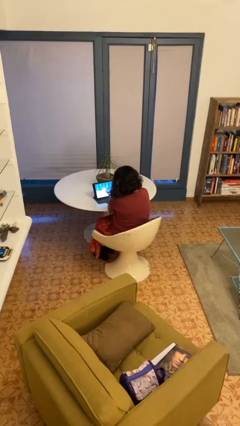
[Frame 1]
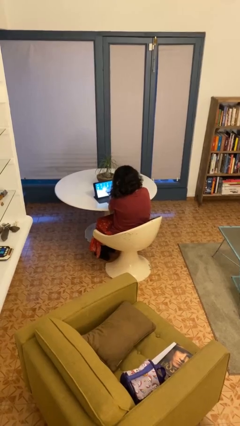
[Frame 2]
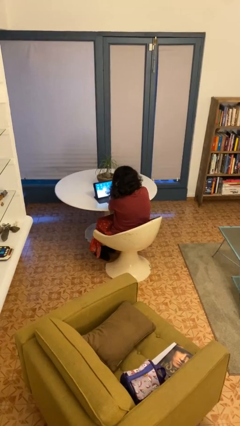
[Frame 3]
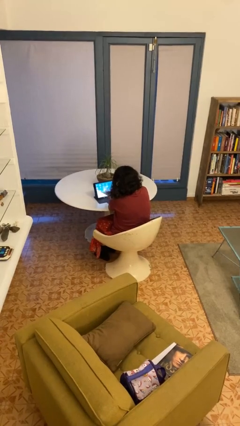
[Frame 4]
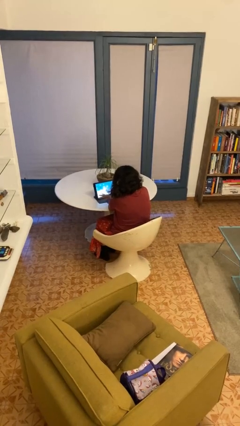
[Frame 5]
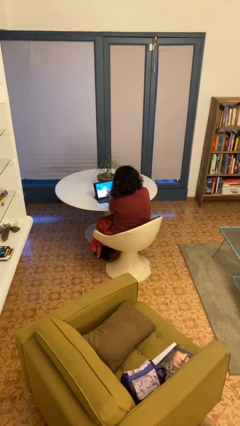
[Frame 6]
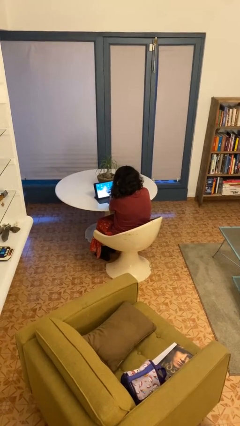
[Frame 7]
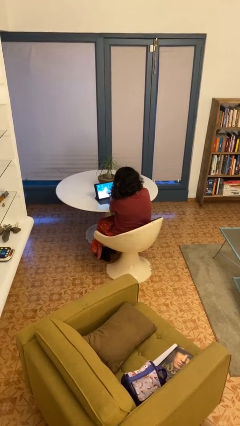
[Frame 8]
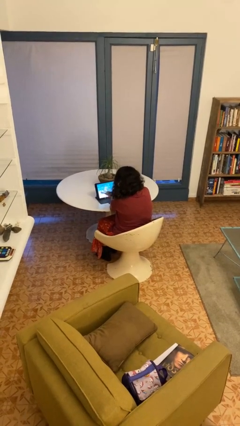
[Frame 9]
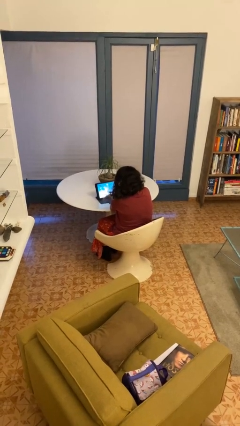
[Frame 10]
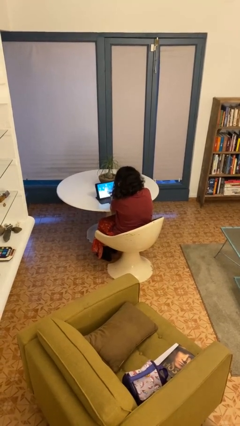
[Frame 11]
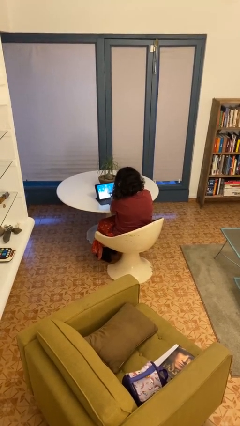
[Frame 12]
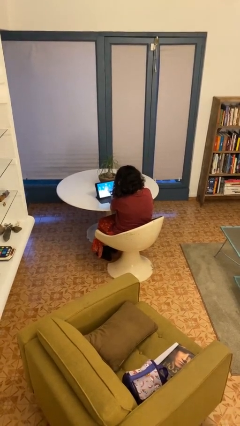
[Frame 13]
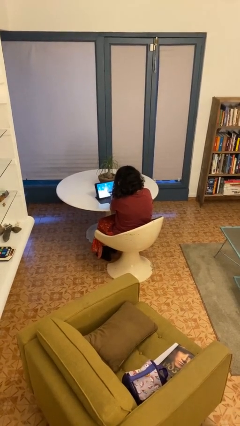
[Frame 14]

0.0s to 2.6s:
person interacts with tablet

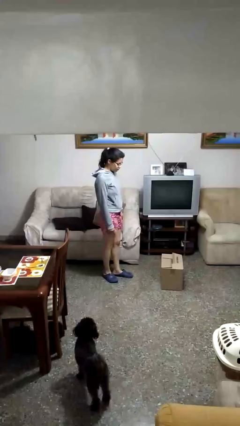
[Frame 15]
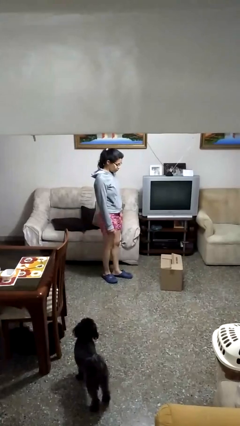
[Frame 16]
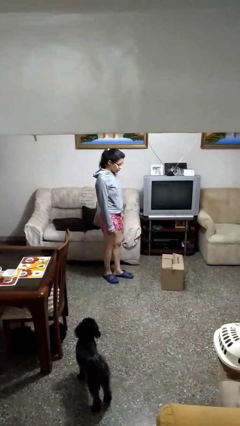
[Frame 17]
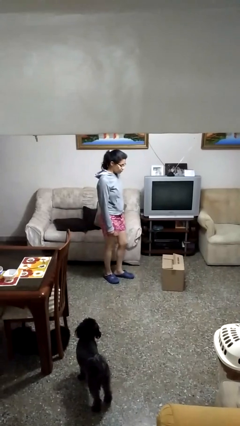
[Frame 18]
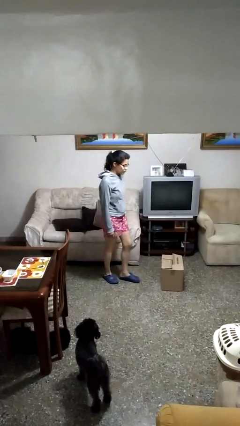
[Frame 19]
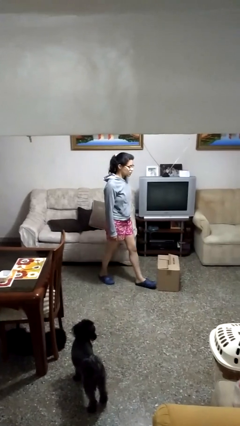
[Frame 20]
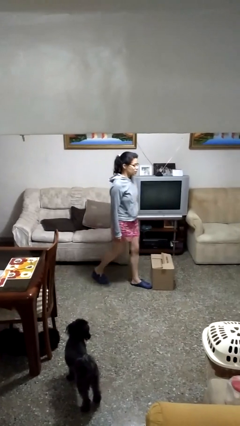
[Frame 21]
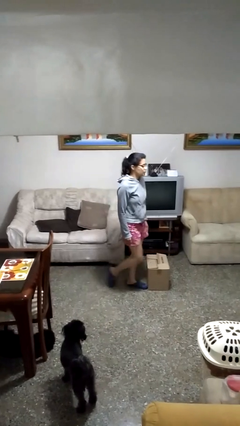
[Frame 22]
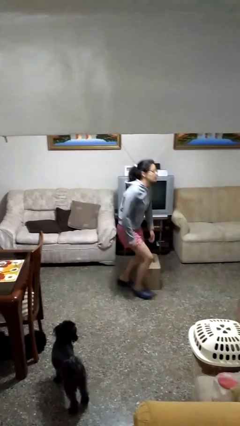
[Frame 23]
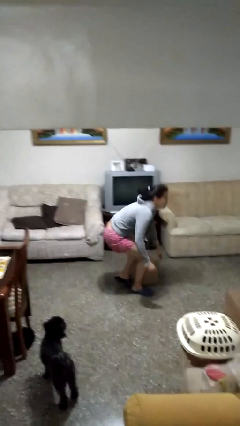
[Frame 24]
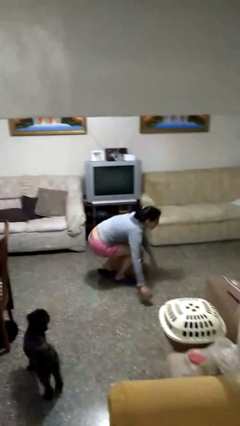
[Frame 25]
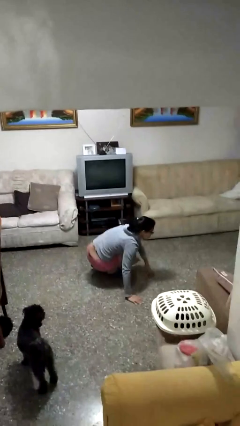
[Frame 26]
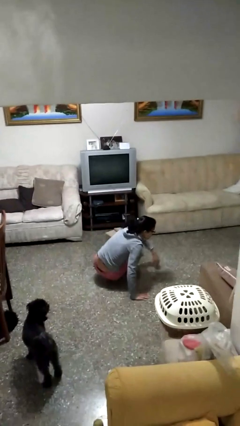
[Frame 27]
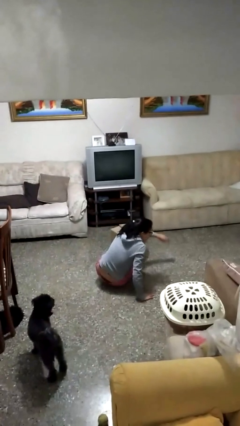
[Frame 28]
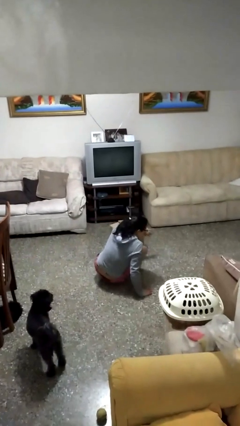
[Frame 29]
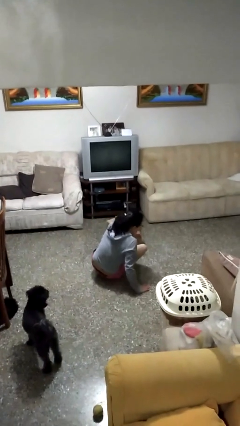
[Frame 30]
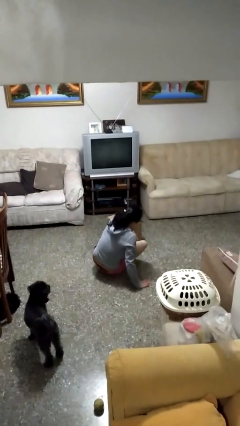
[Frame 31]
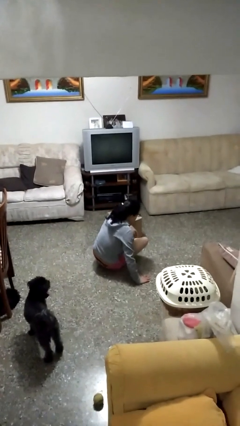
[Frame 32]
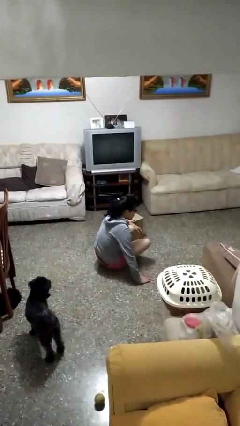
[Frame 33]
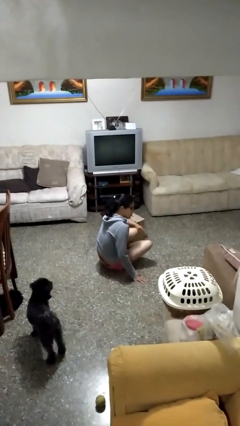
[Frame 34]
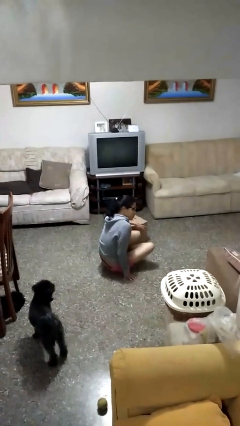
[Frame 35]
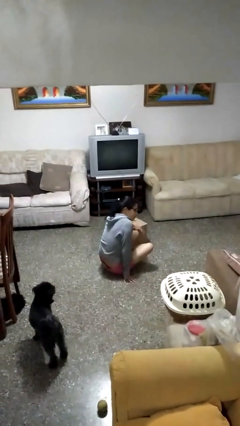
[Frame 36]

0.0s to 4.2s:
person trips on object on floor

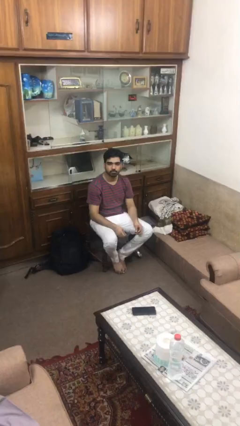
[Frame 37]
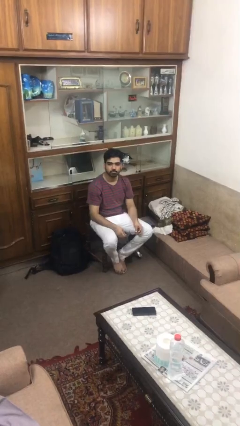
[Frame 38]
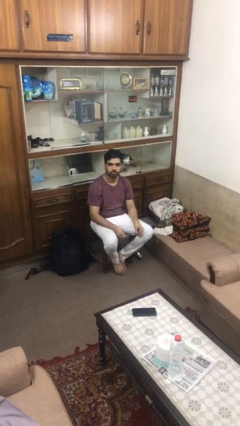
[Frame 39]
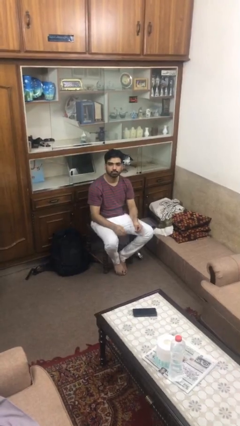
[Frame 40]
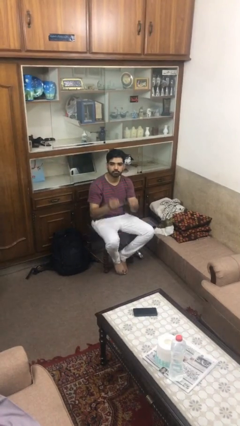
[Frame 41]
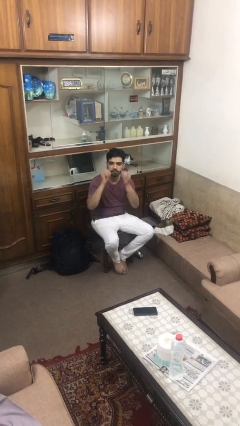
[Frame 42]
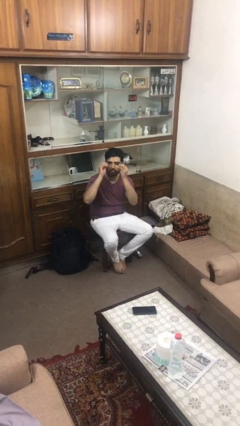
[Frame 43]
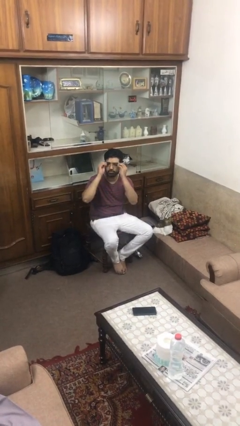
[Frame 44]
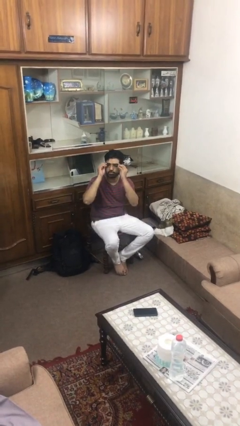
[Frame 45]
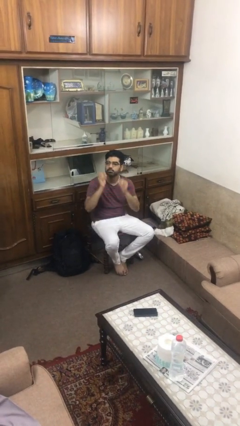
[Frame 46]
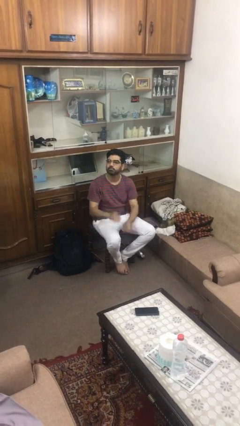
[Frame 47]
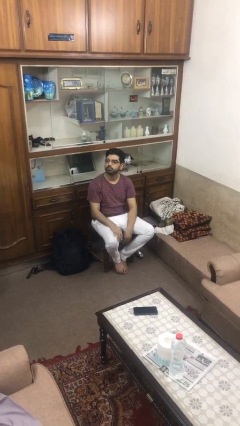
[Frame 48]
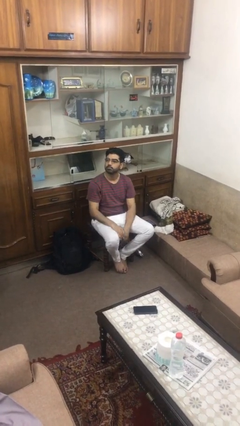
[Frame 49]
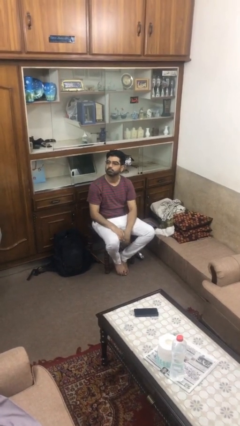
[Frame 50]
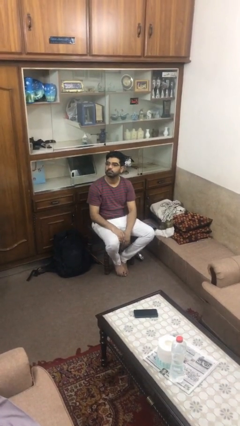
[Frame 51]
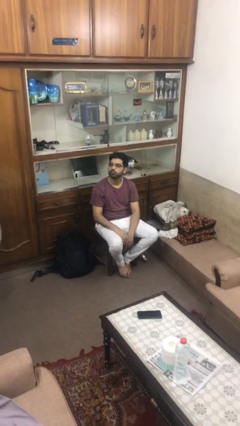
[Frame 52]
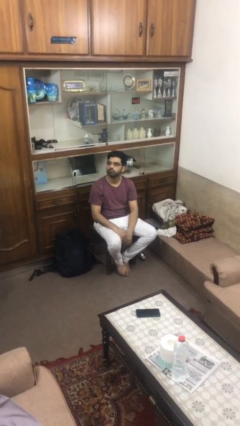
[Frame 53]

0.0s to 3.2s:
person puts on glasses

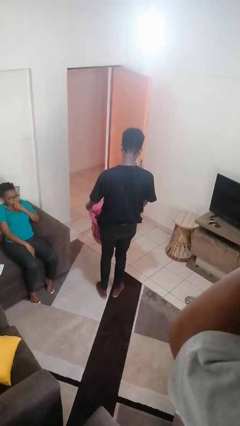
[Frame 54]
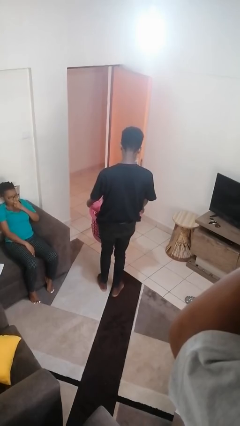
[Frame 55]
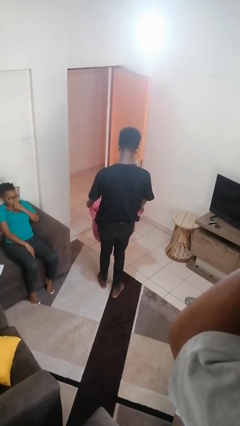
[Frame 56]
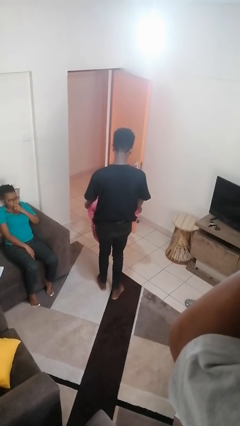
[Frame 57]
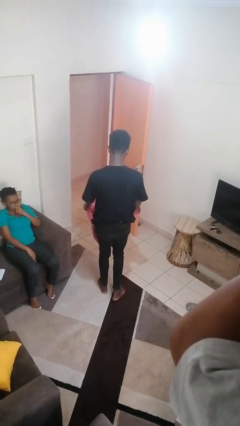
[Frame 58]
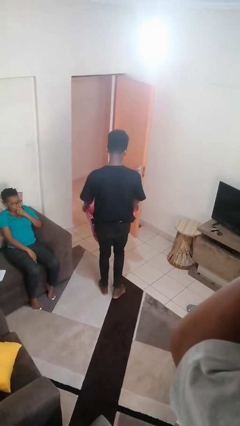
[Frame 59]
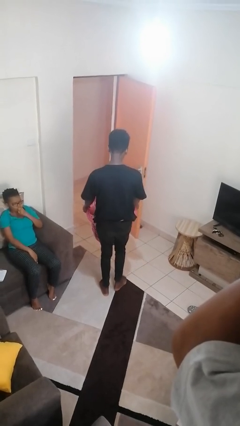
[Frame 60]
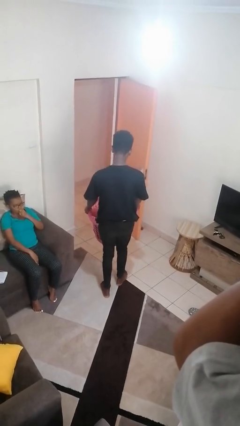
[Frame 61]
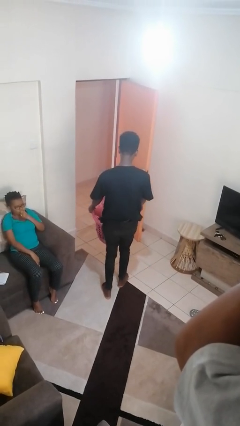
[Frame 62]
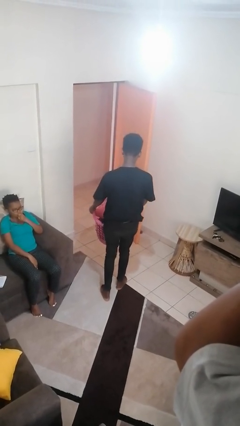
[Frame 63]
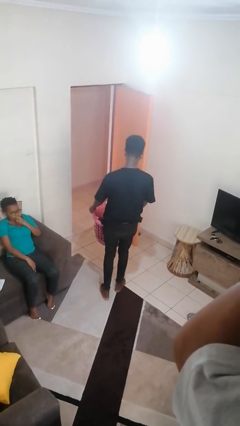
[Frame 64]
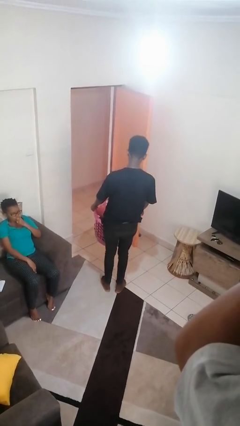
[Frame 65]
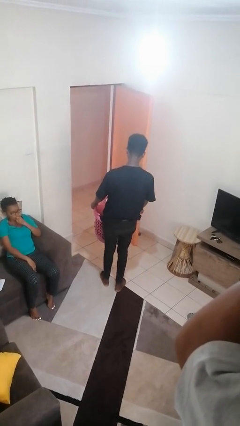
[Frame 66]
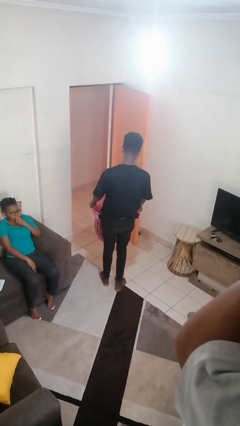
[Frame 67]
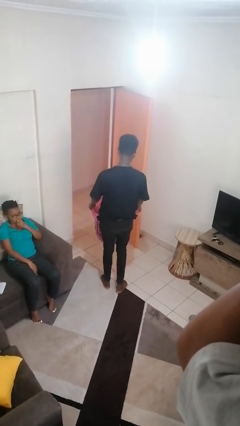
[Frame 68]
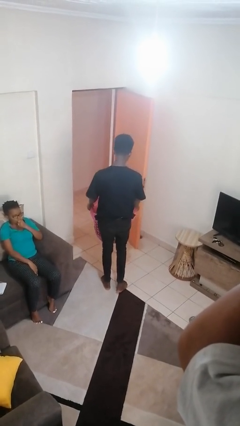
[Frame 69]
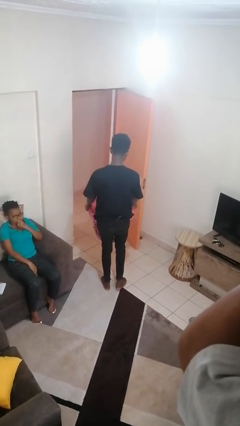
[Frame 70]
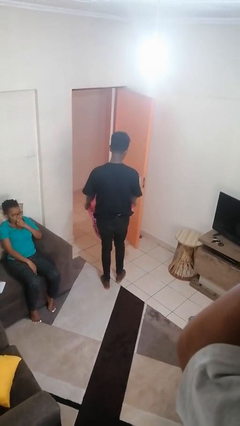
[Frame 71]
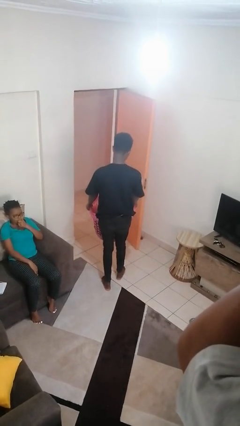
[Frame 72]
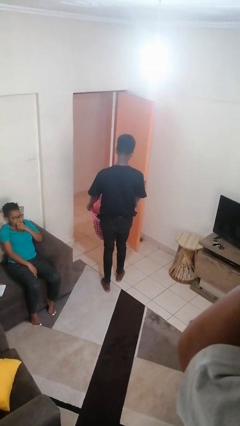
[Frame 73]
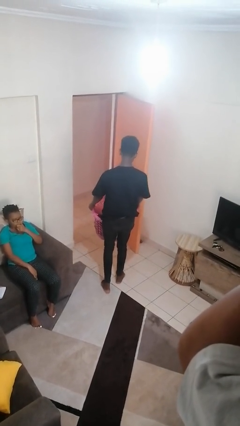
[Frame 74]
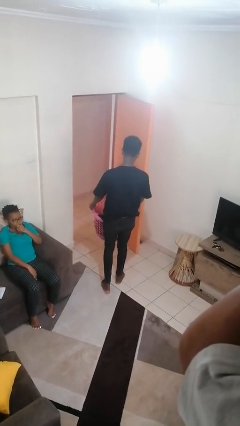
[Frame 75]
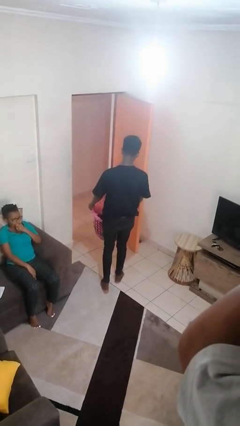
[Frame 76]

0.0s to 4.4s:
person carries laundry basket

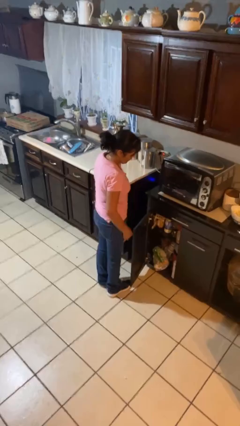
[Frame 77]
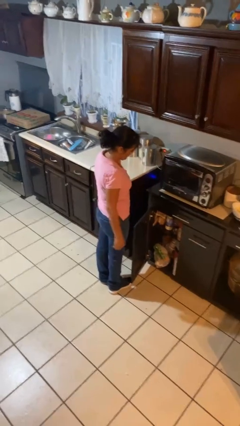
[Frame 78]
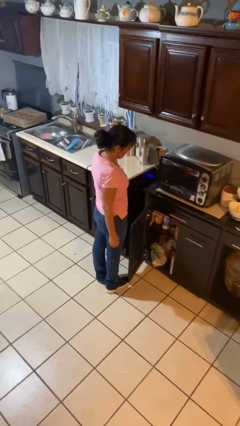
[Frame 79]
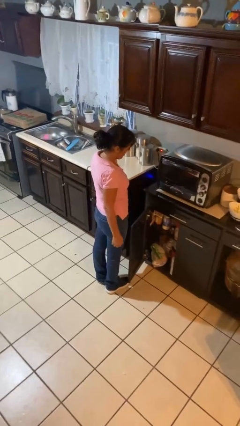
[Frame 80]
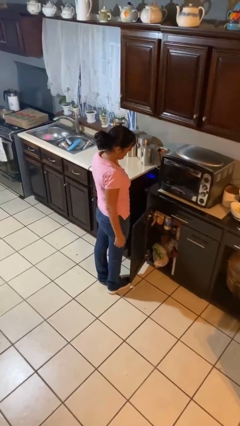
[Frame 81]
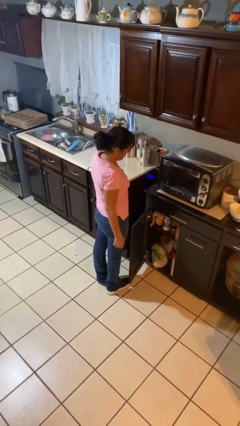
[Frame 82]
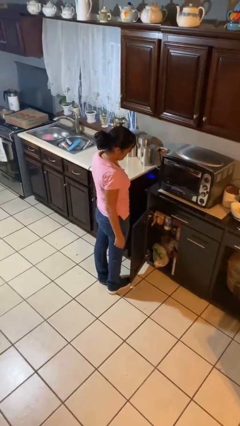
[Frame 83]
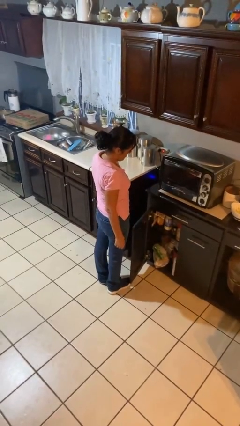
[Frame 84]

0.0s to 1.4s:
person opens cabinet

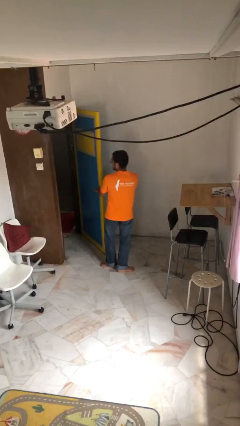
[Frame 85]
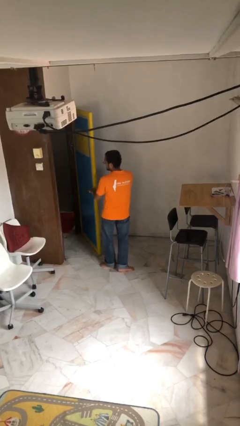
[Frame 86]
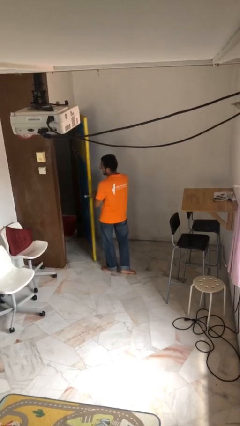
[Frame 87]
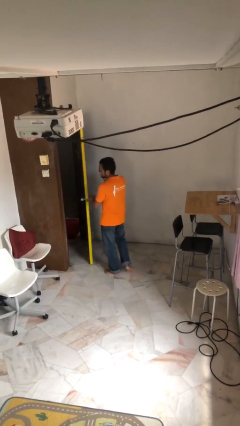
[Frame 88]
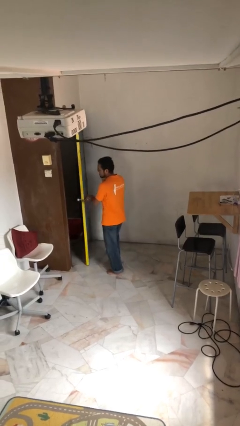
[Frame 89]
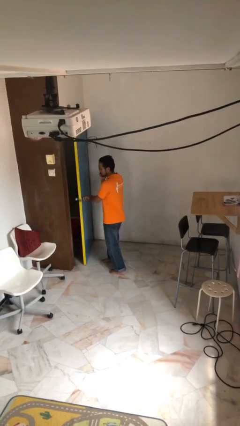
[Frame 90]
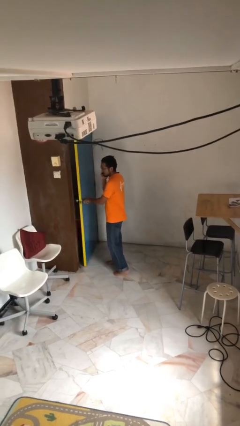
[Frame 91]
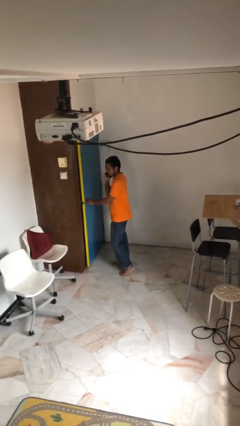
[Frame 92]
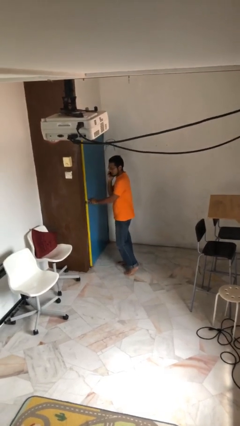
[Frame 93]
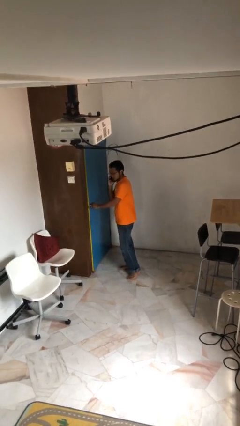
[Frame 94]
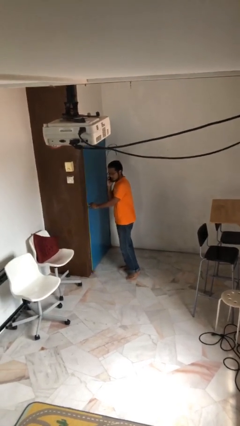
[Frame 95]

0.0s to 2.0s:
person closes facility door
